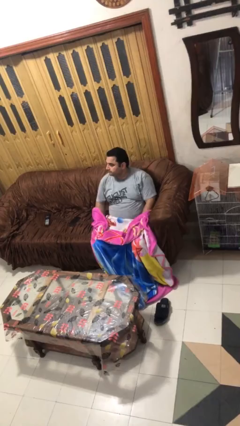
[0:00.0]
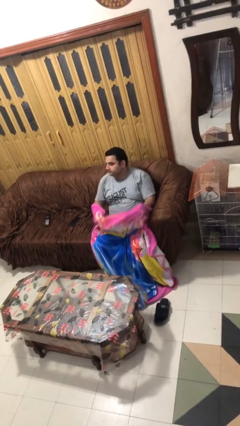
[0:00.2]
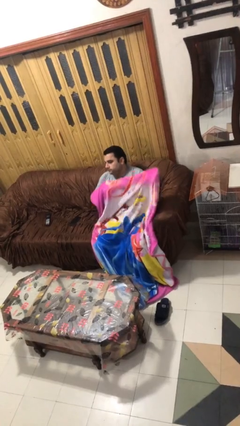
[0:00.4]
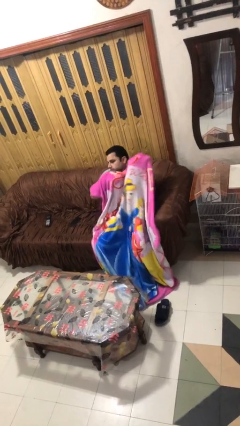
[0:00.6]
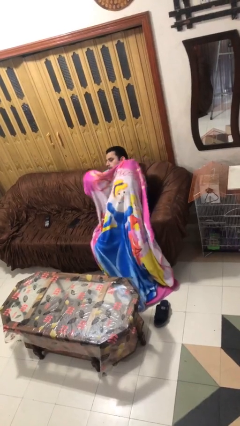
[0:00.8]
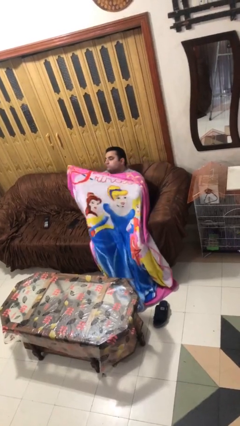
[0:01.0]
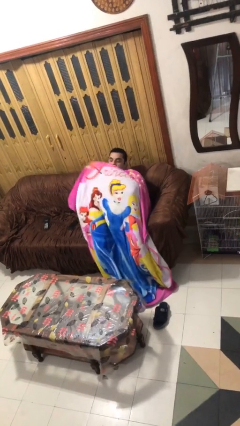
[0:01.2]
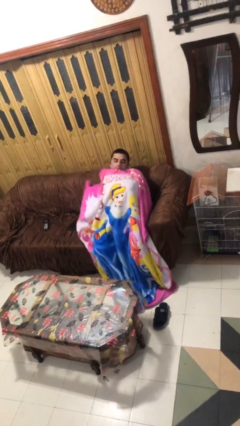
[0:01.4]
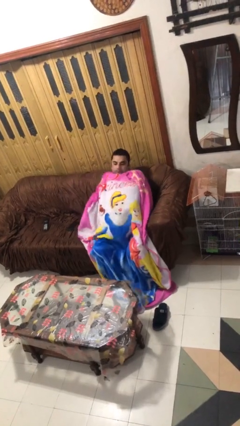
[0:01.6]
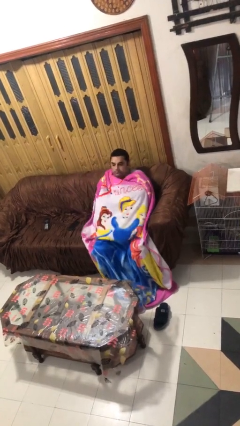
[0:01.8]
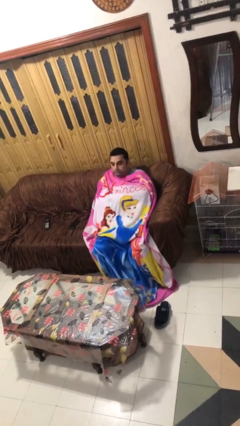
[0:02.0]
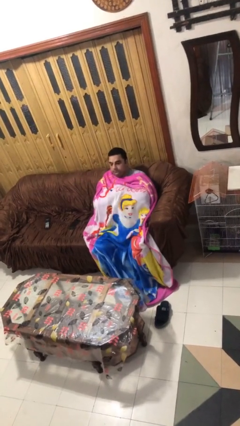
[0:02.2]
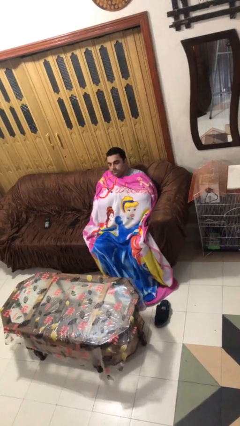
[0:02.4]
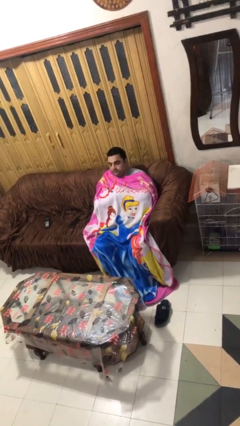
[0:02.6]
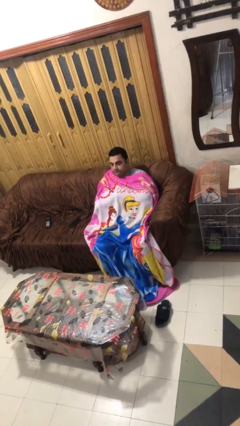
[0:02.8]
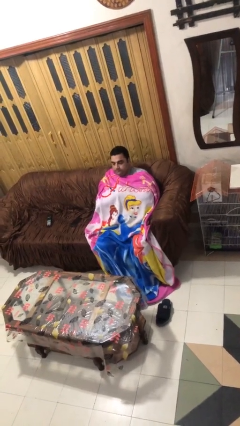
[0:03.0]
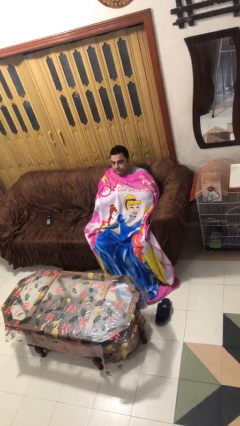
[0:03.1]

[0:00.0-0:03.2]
person covers with blanket

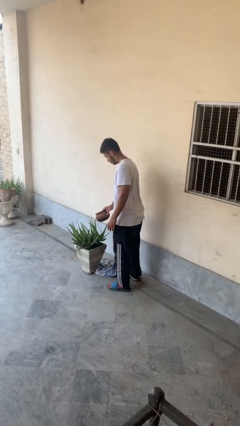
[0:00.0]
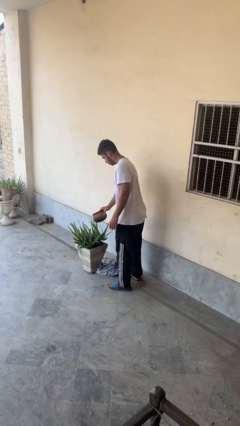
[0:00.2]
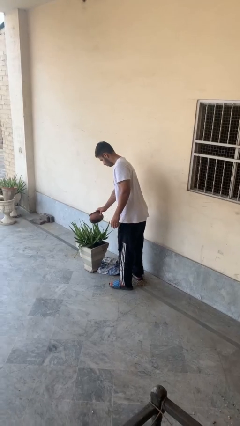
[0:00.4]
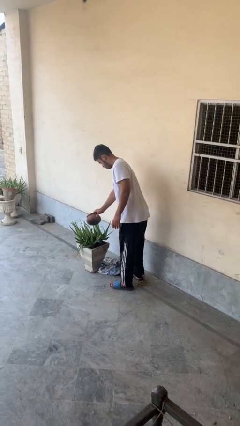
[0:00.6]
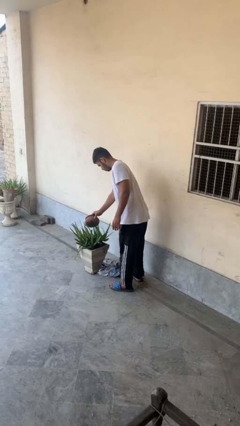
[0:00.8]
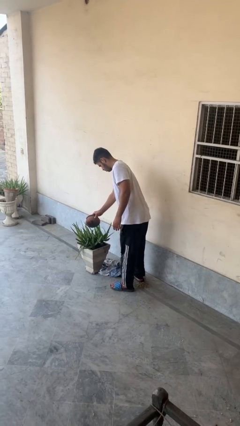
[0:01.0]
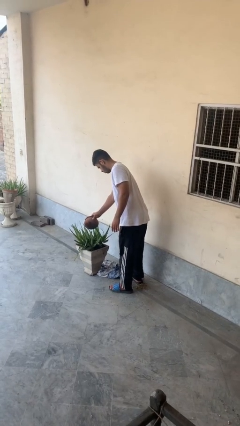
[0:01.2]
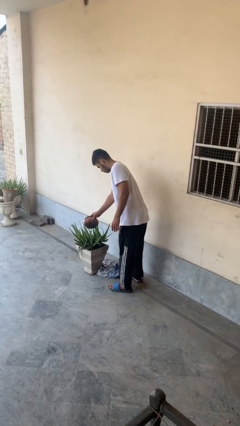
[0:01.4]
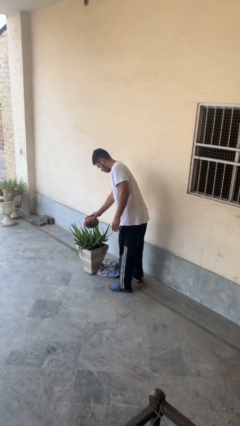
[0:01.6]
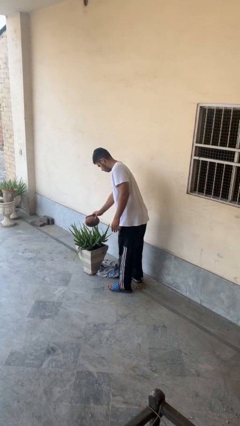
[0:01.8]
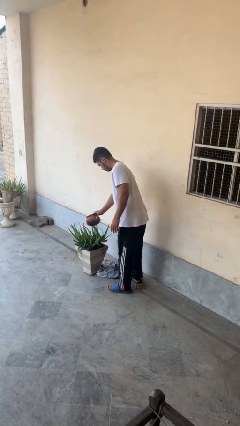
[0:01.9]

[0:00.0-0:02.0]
person waters houseplant

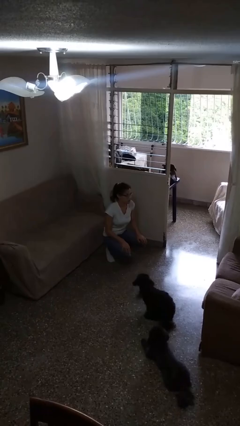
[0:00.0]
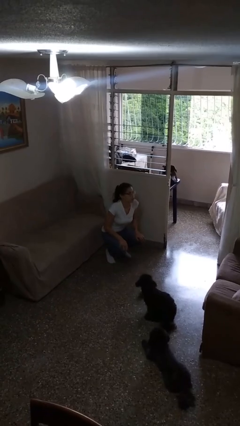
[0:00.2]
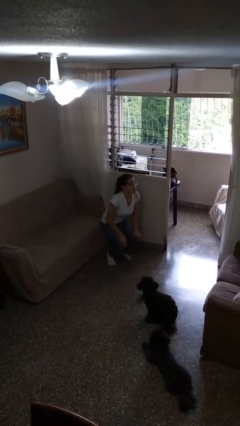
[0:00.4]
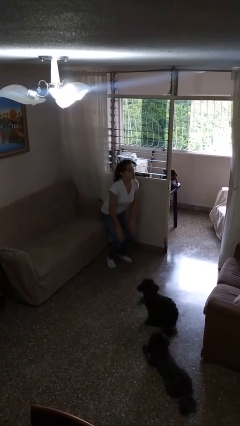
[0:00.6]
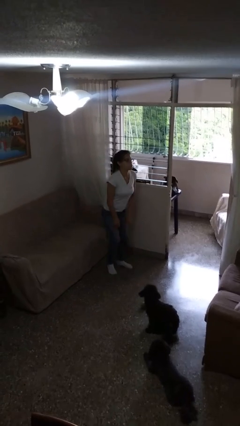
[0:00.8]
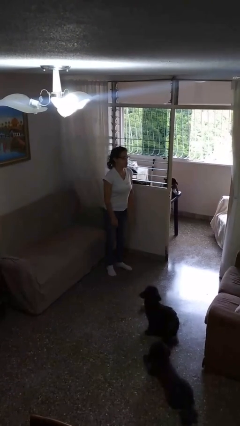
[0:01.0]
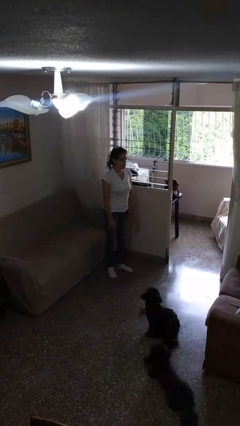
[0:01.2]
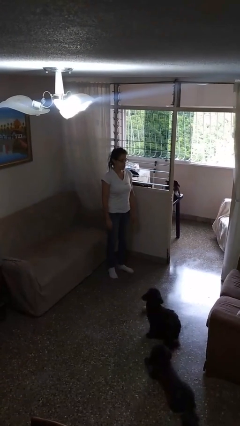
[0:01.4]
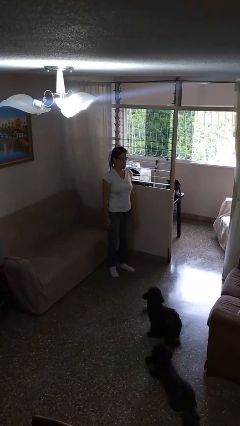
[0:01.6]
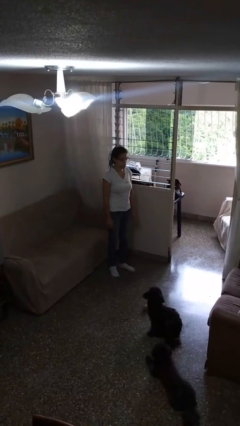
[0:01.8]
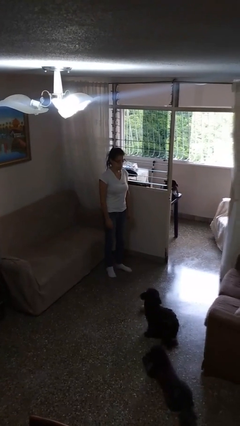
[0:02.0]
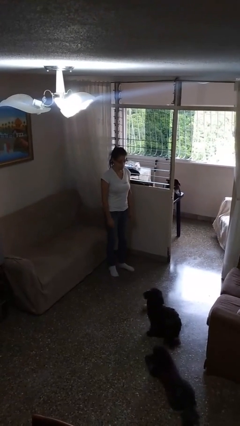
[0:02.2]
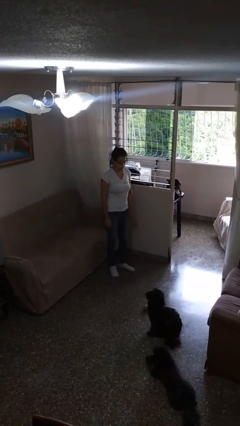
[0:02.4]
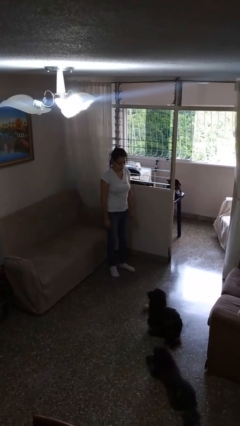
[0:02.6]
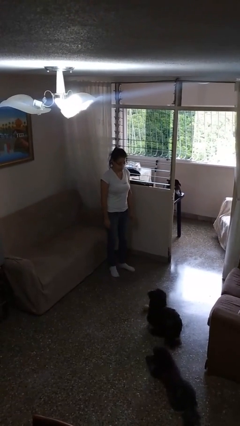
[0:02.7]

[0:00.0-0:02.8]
person stands up

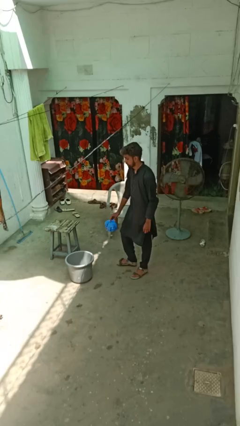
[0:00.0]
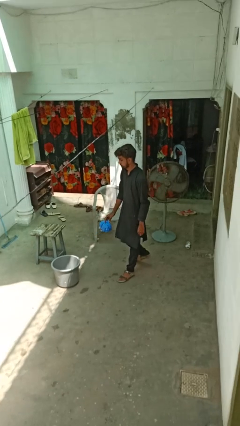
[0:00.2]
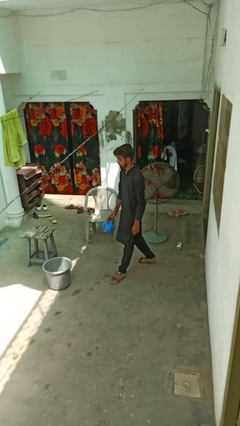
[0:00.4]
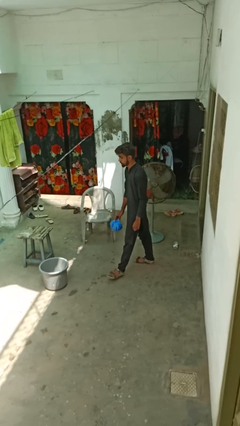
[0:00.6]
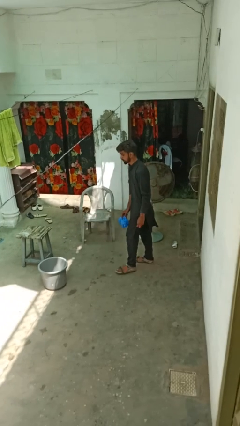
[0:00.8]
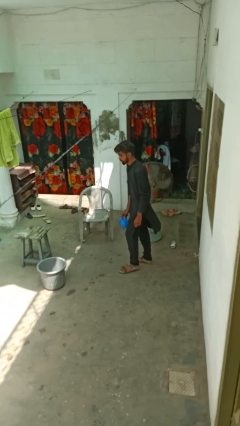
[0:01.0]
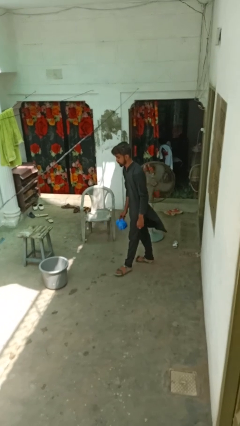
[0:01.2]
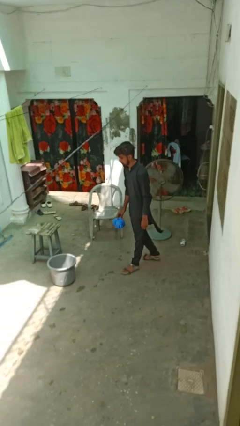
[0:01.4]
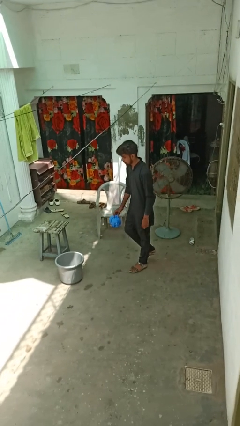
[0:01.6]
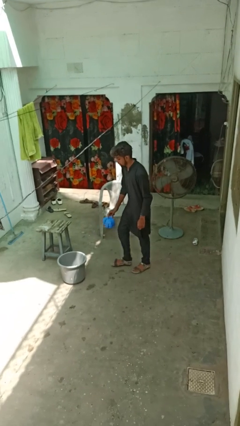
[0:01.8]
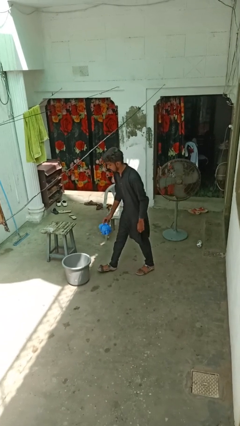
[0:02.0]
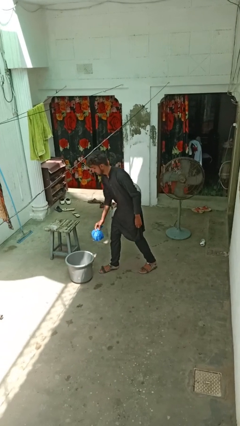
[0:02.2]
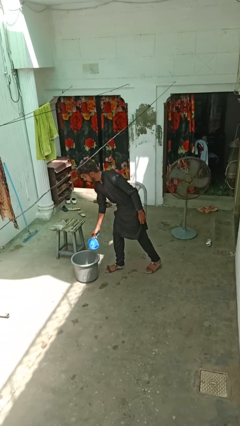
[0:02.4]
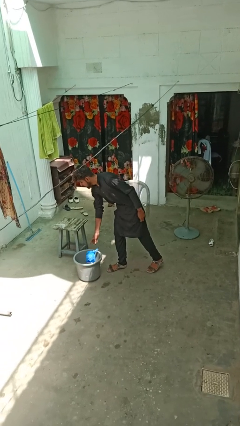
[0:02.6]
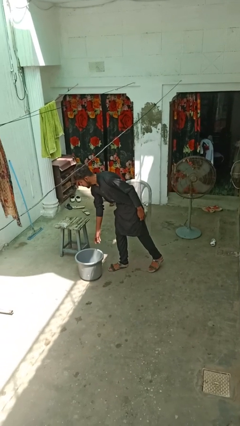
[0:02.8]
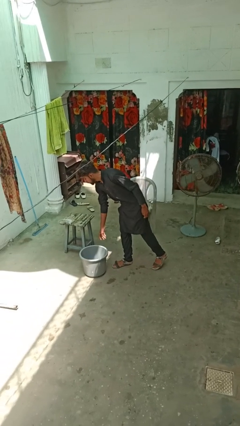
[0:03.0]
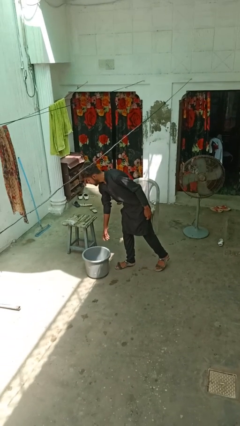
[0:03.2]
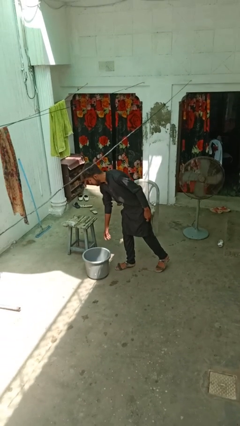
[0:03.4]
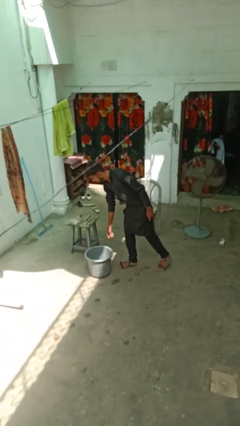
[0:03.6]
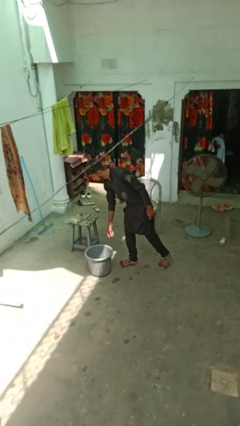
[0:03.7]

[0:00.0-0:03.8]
person discards trash

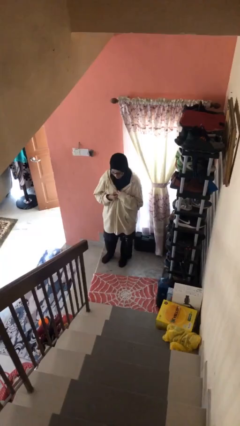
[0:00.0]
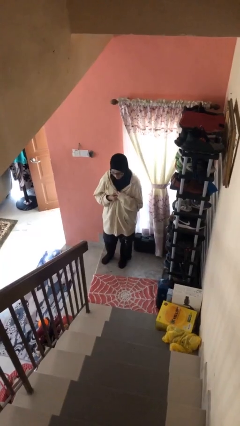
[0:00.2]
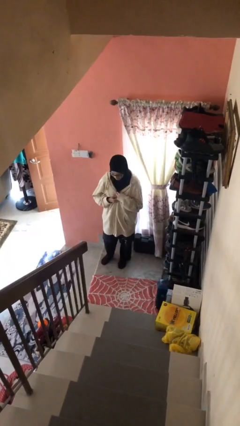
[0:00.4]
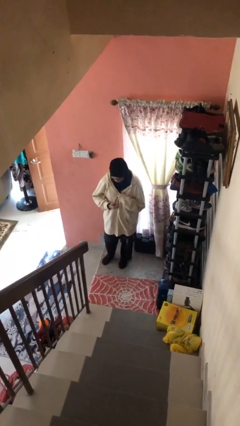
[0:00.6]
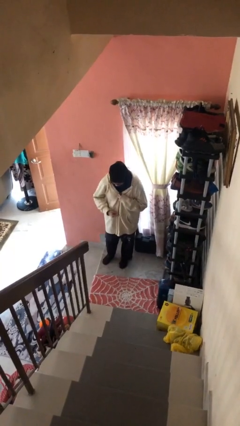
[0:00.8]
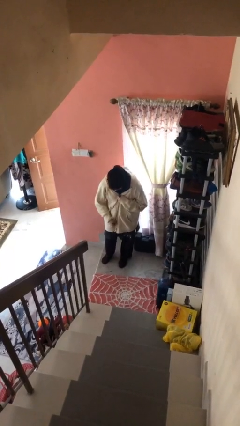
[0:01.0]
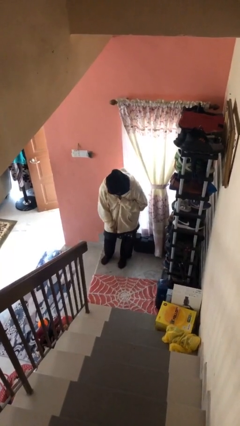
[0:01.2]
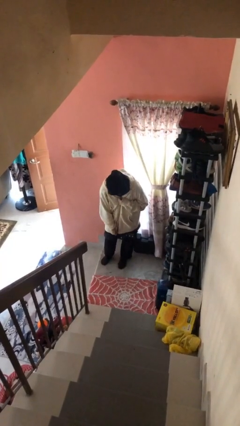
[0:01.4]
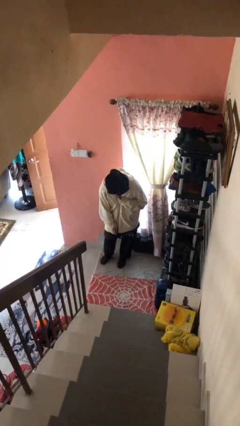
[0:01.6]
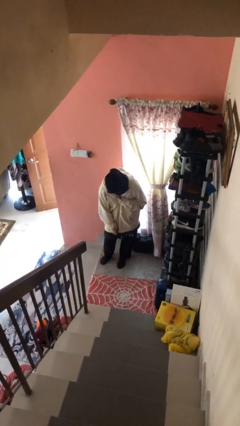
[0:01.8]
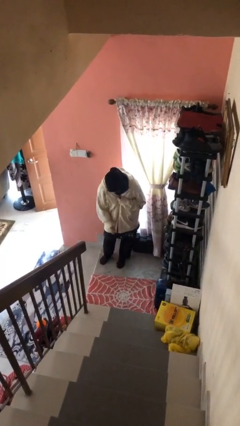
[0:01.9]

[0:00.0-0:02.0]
person unzips jacket

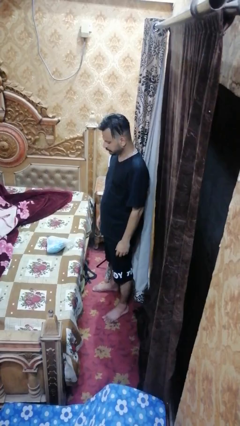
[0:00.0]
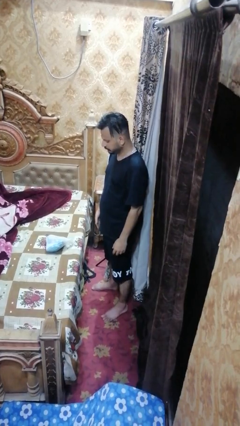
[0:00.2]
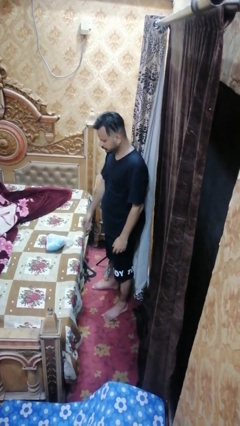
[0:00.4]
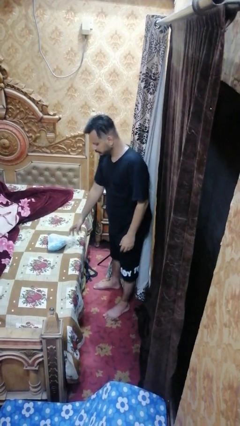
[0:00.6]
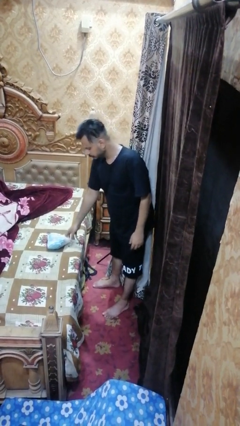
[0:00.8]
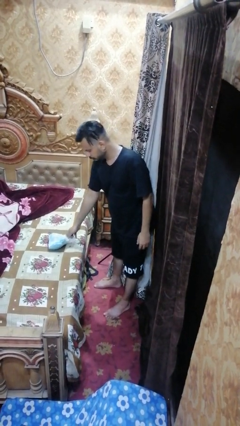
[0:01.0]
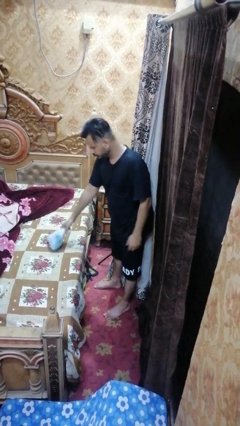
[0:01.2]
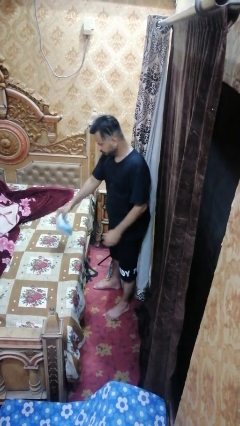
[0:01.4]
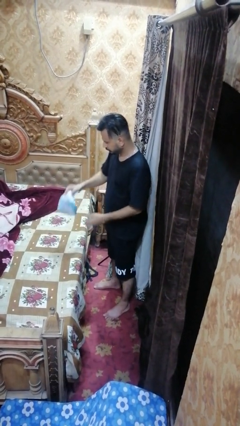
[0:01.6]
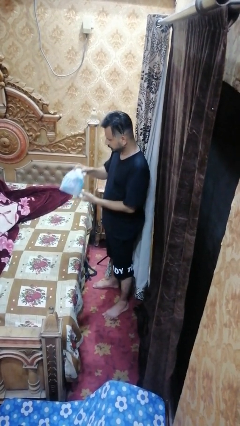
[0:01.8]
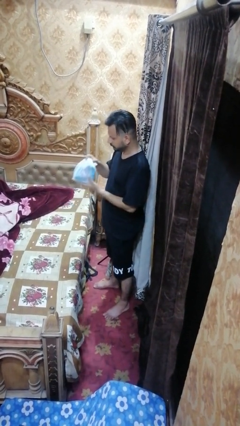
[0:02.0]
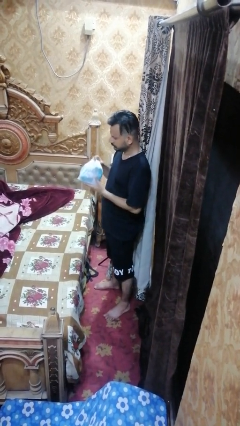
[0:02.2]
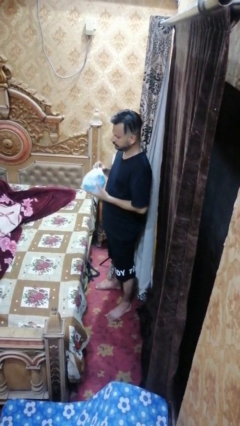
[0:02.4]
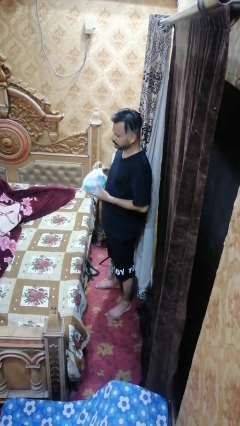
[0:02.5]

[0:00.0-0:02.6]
person picks up object from bed

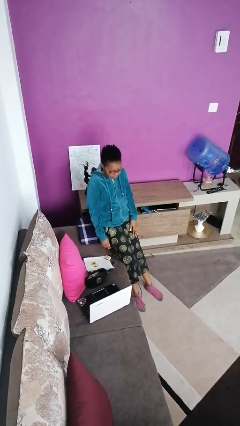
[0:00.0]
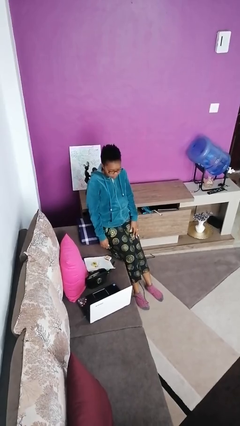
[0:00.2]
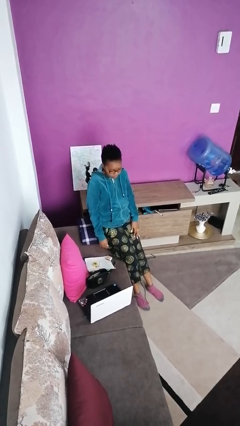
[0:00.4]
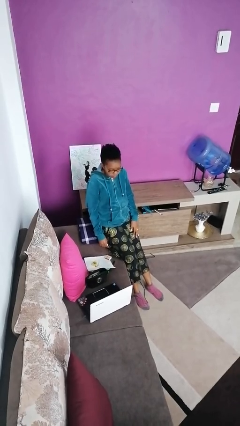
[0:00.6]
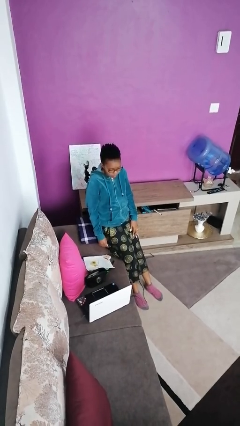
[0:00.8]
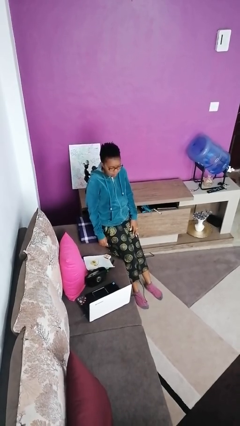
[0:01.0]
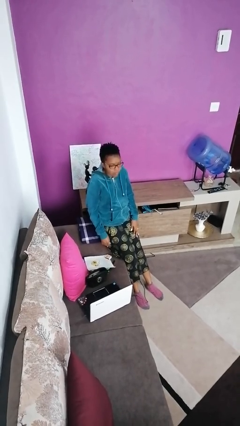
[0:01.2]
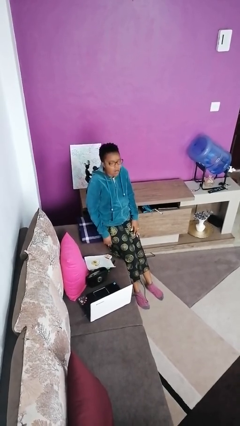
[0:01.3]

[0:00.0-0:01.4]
person closes cabinet
